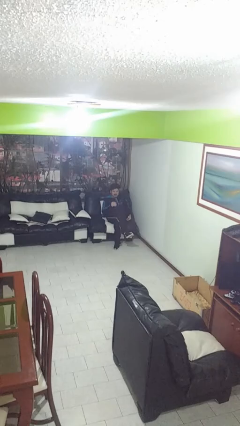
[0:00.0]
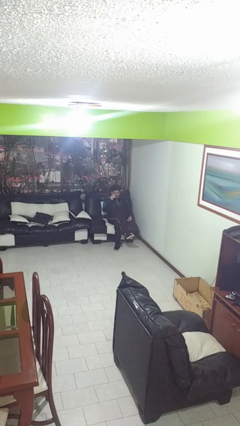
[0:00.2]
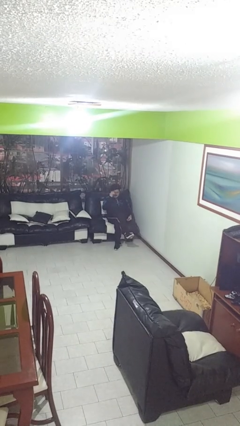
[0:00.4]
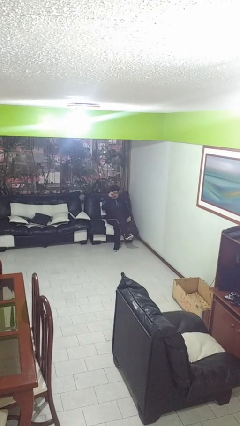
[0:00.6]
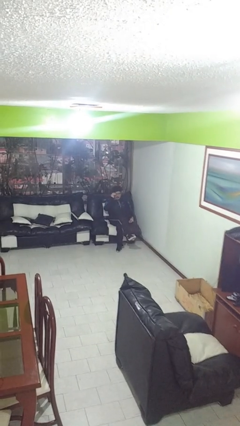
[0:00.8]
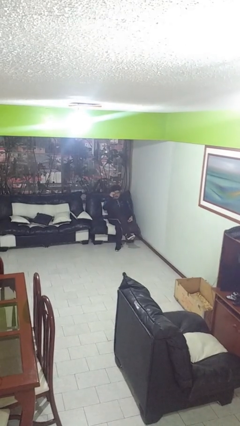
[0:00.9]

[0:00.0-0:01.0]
person puts on glasses

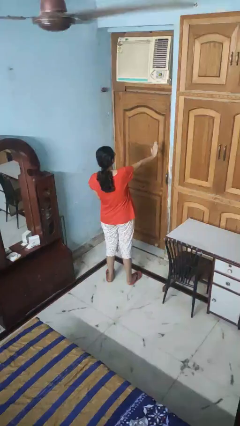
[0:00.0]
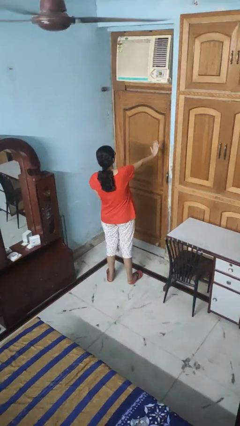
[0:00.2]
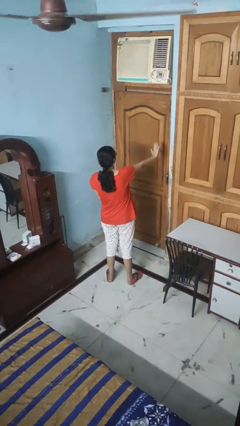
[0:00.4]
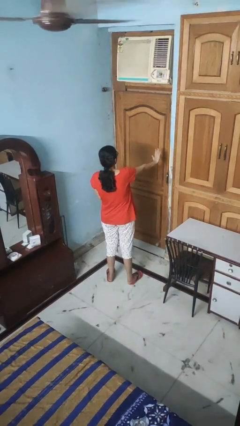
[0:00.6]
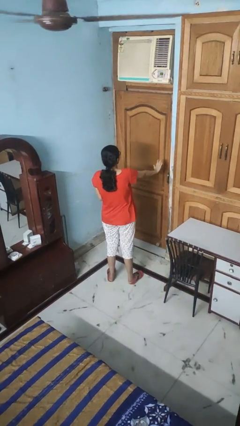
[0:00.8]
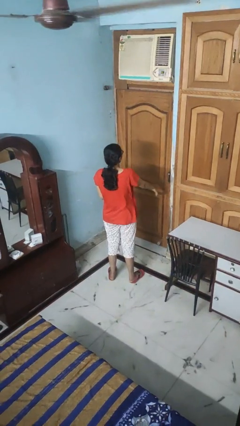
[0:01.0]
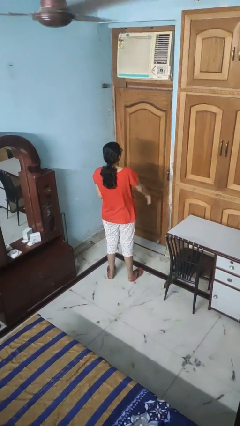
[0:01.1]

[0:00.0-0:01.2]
person gestures stop

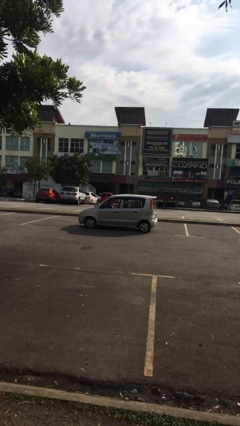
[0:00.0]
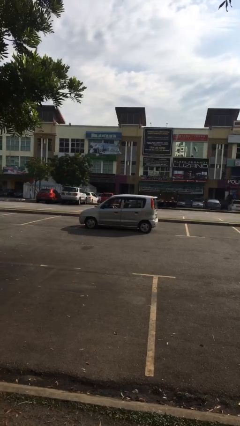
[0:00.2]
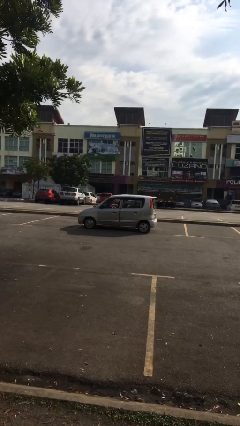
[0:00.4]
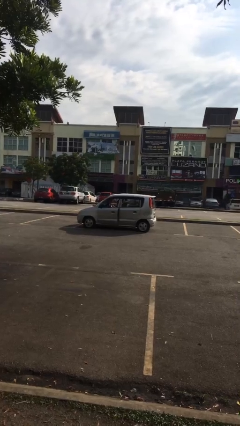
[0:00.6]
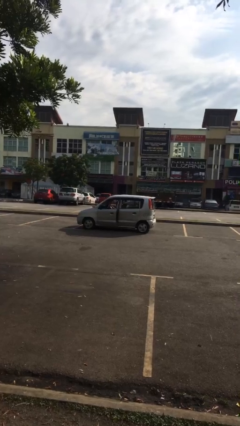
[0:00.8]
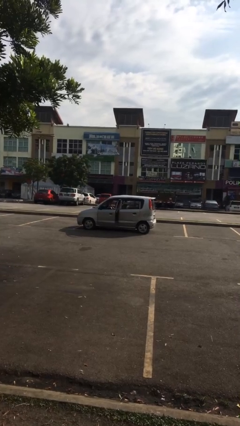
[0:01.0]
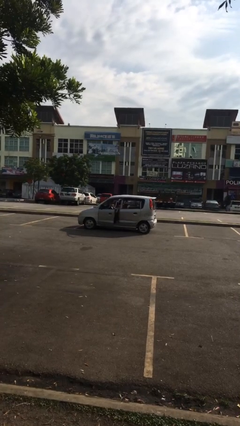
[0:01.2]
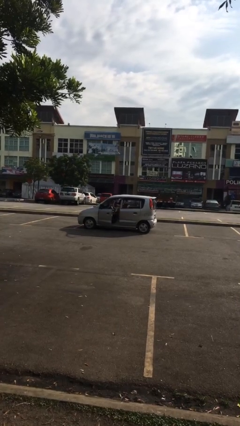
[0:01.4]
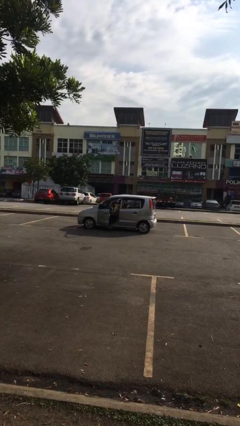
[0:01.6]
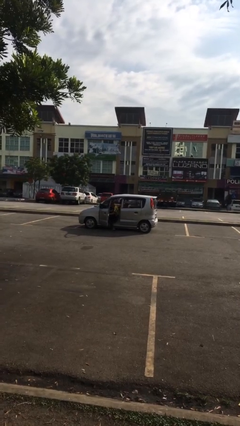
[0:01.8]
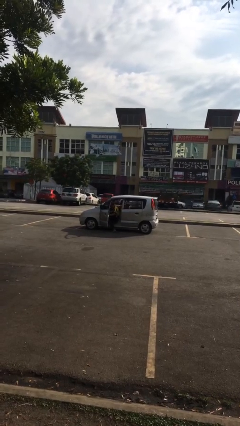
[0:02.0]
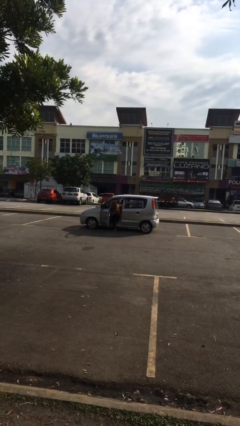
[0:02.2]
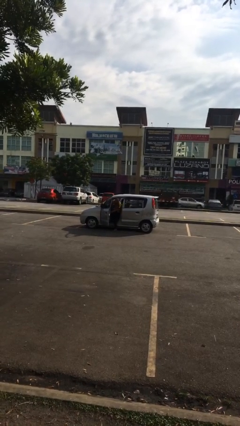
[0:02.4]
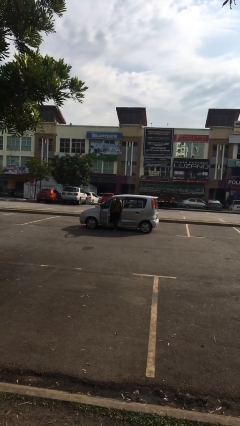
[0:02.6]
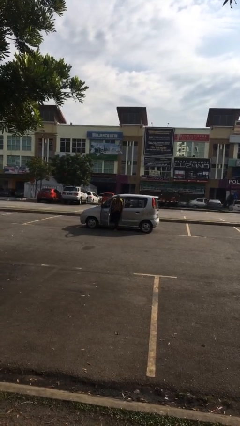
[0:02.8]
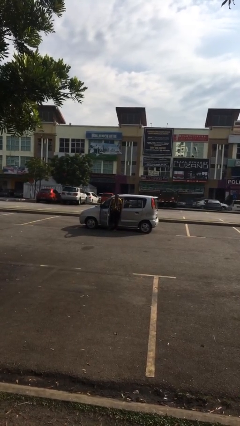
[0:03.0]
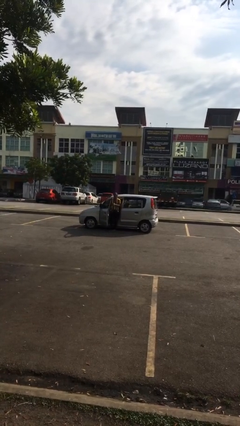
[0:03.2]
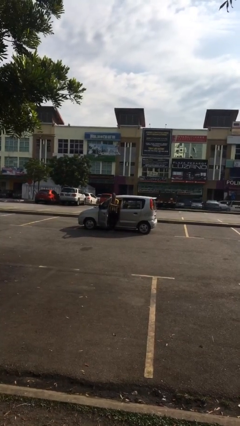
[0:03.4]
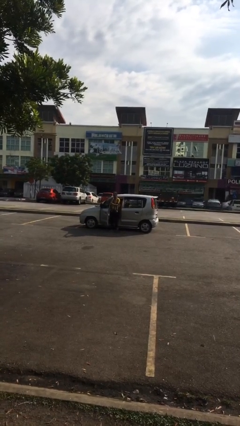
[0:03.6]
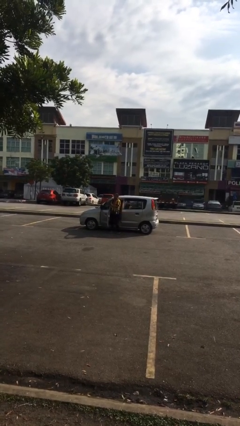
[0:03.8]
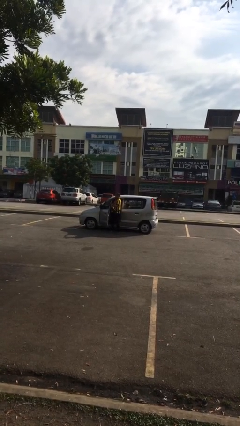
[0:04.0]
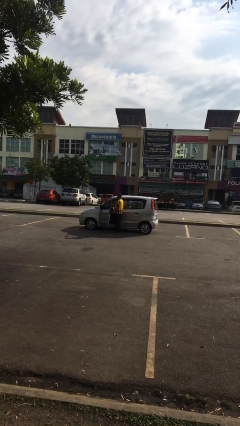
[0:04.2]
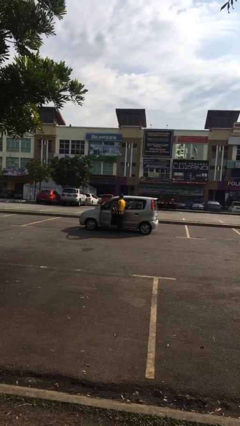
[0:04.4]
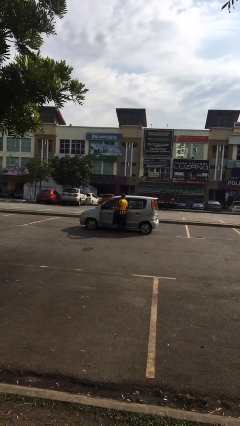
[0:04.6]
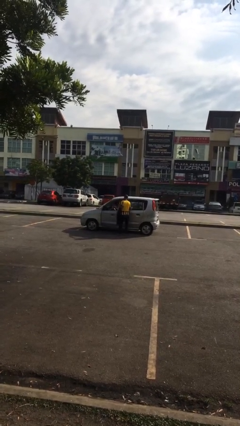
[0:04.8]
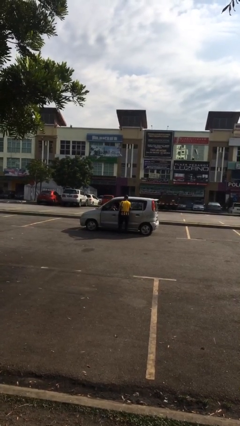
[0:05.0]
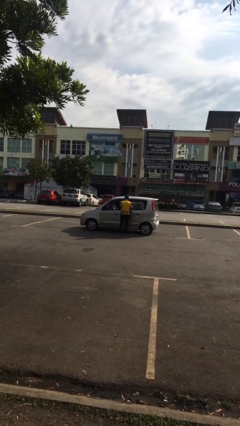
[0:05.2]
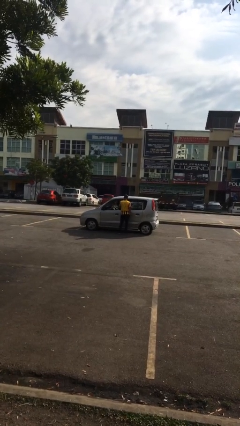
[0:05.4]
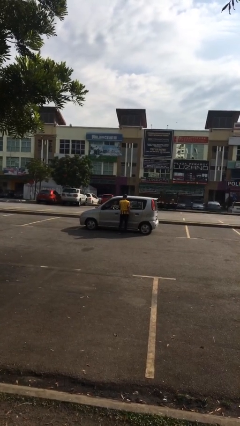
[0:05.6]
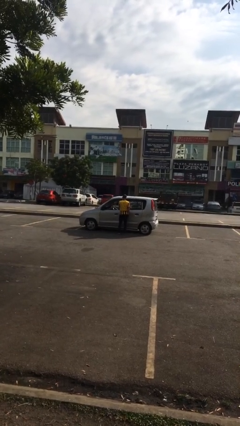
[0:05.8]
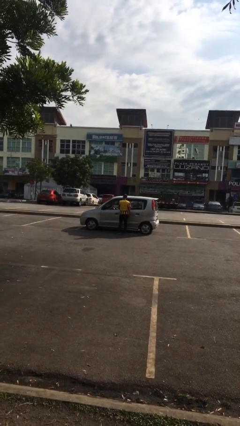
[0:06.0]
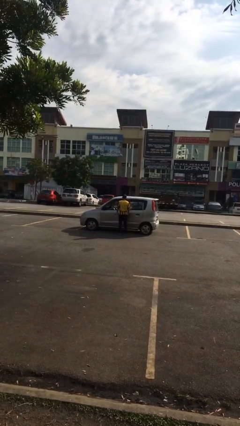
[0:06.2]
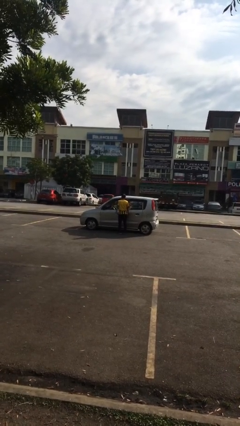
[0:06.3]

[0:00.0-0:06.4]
car drops off person

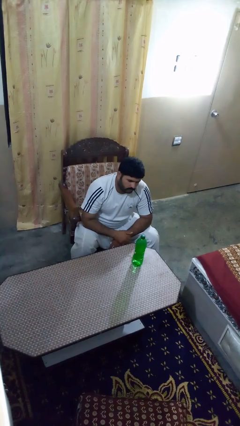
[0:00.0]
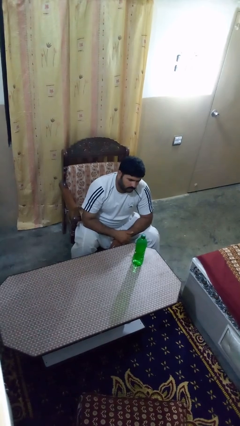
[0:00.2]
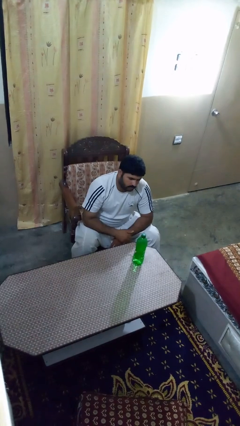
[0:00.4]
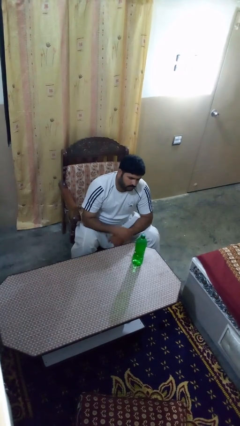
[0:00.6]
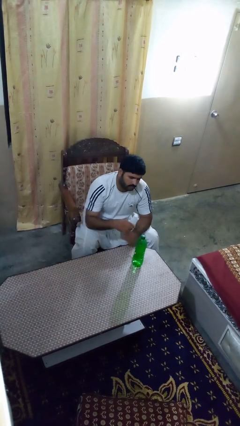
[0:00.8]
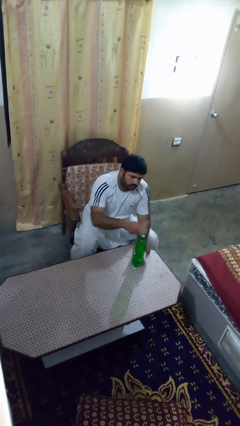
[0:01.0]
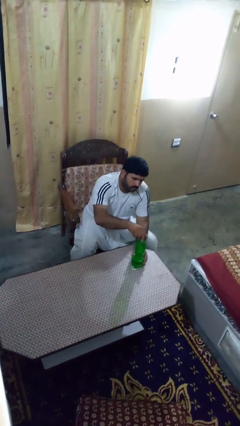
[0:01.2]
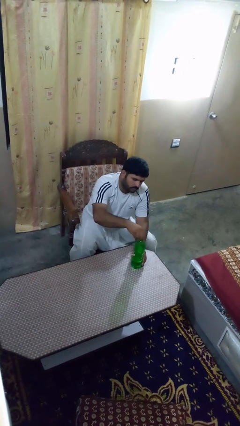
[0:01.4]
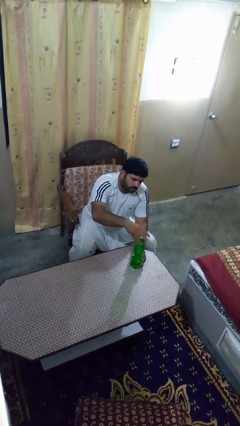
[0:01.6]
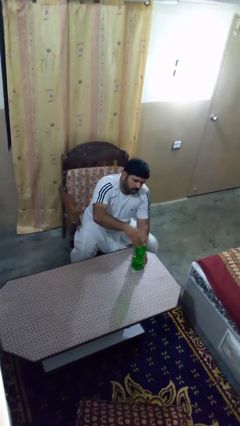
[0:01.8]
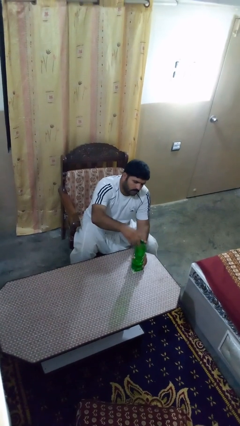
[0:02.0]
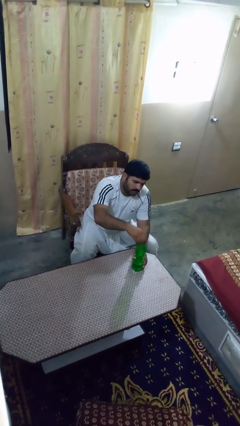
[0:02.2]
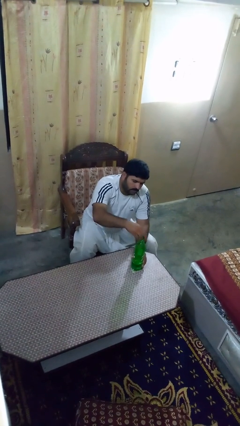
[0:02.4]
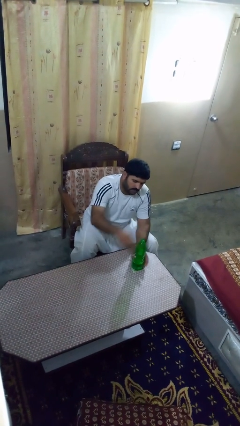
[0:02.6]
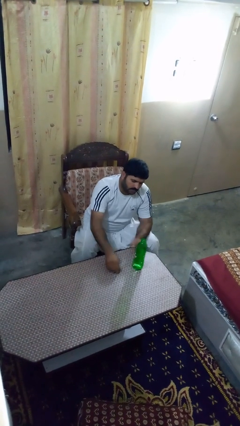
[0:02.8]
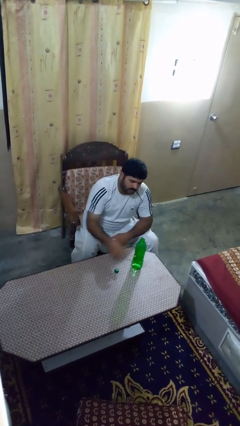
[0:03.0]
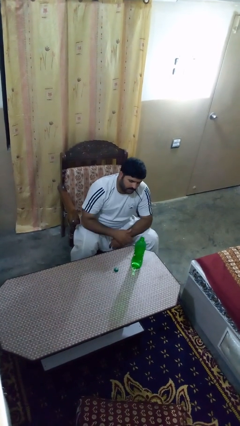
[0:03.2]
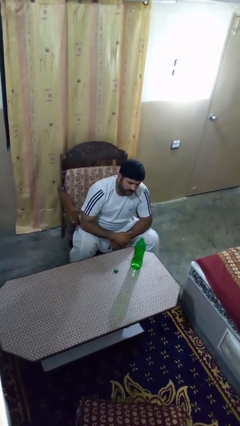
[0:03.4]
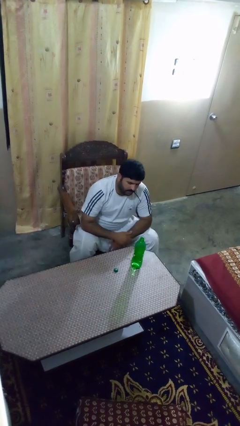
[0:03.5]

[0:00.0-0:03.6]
person unscrews lid from bottle

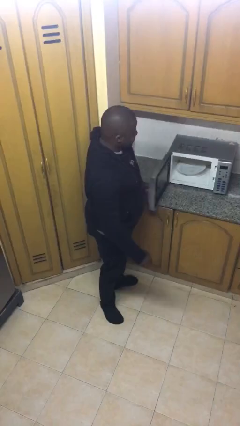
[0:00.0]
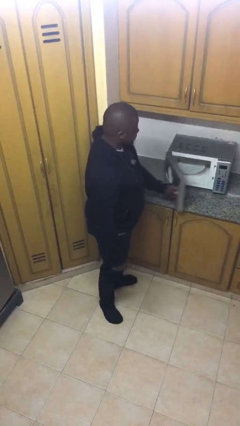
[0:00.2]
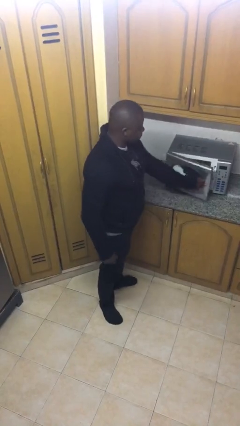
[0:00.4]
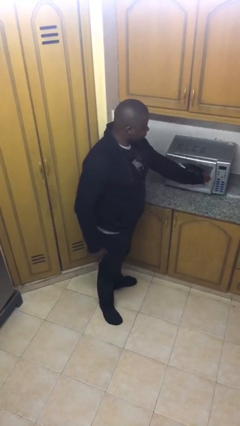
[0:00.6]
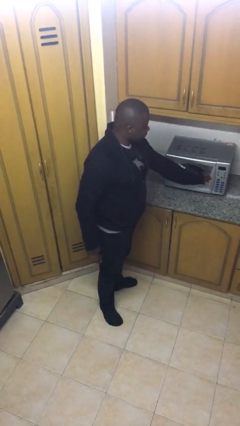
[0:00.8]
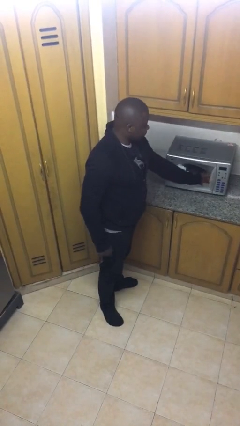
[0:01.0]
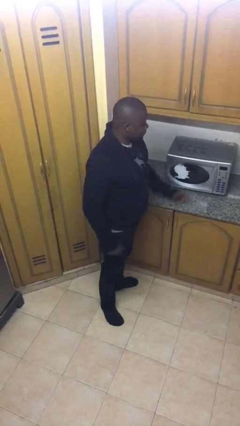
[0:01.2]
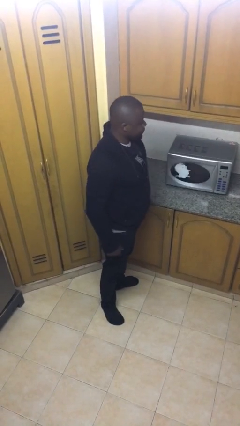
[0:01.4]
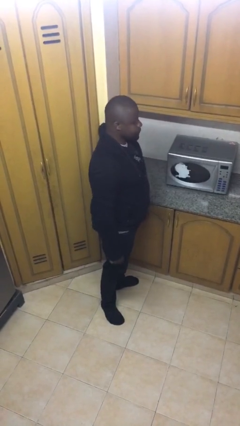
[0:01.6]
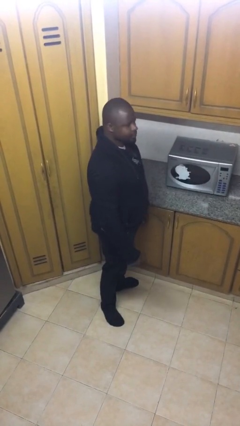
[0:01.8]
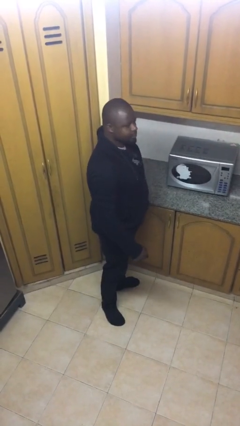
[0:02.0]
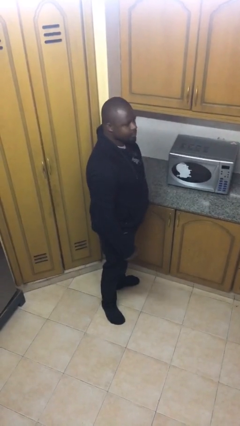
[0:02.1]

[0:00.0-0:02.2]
person closes microwave

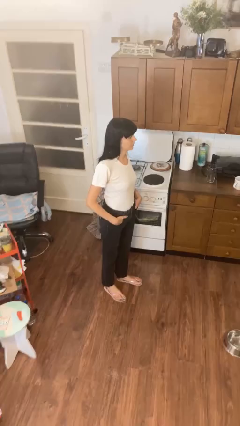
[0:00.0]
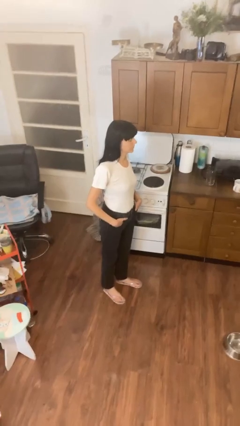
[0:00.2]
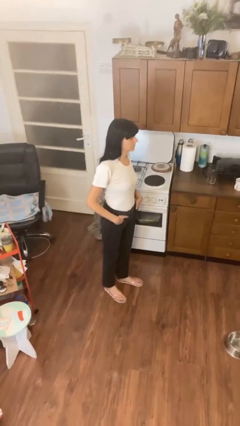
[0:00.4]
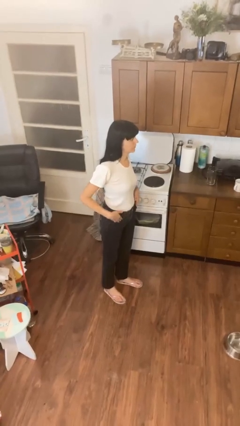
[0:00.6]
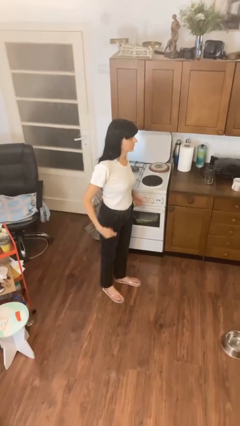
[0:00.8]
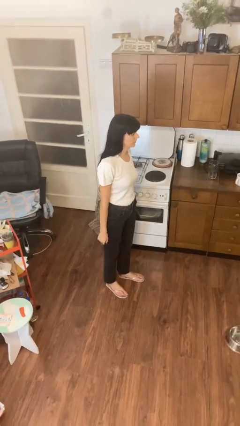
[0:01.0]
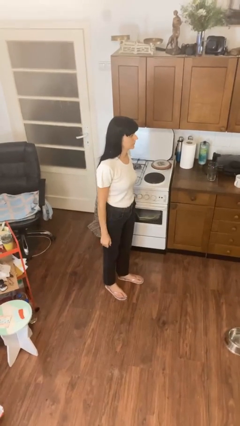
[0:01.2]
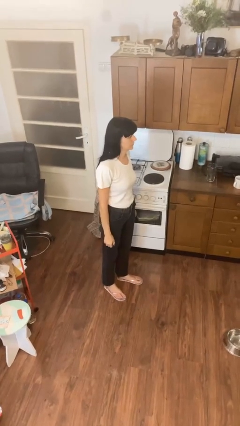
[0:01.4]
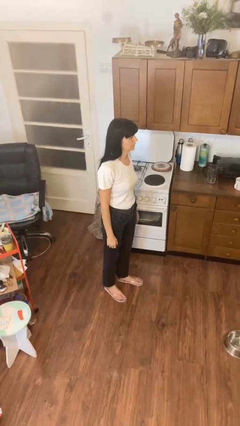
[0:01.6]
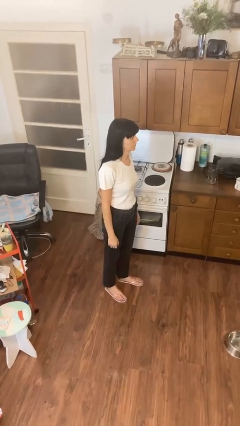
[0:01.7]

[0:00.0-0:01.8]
person puts hands in back pockets

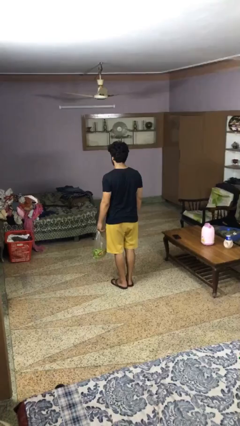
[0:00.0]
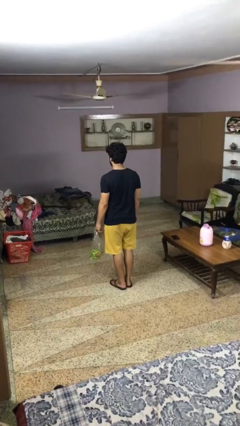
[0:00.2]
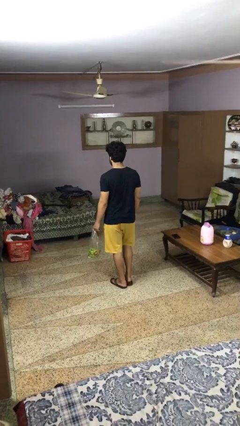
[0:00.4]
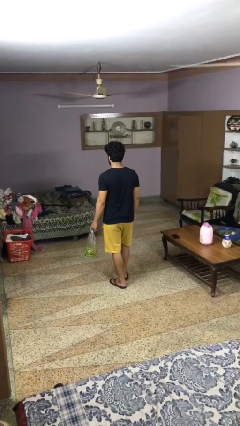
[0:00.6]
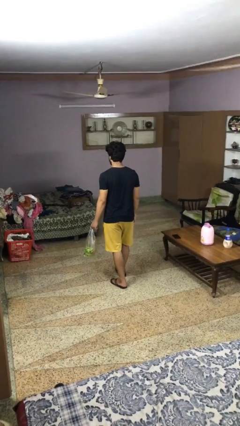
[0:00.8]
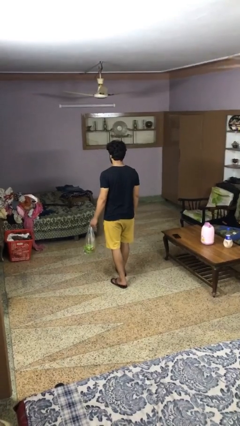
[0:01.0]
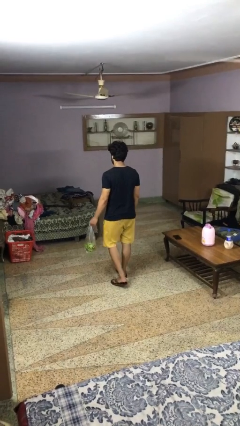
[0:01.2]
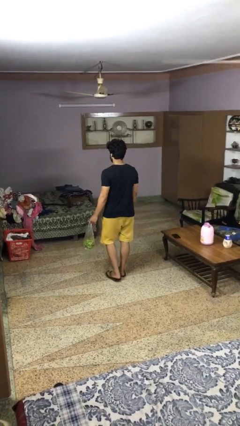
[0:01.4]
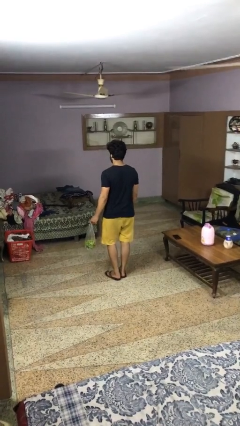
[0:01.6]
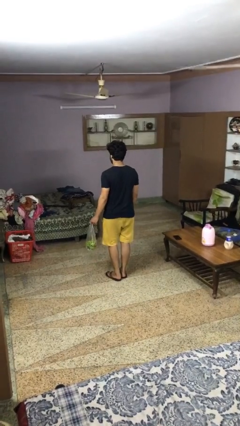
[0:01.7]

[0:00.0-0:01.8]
person carries groceries
